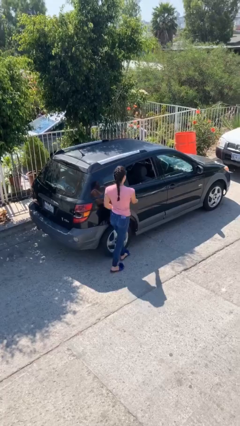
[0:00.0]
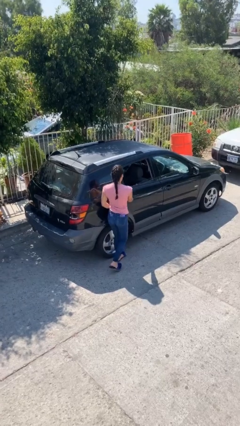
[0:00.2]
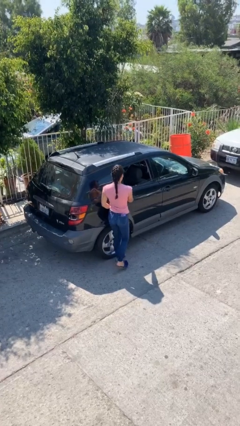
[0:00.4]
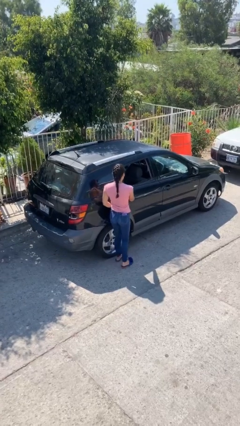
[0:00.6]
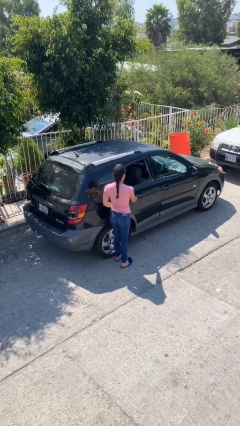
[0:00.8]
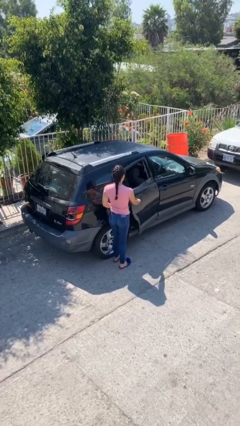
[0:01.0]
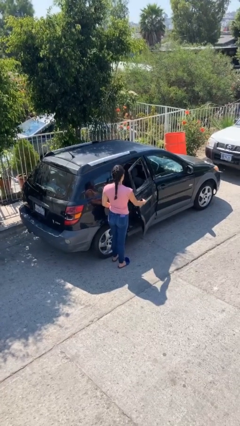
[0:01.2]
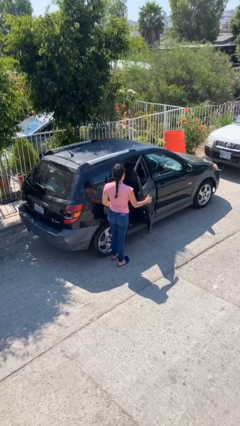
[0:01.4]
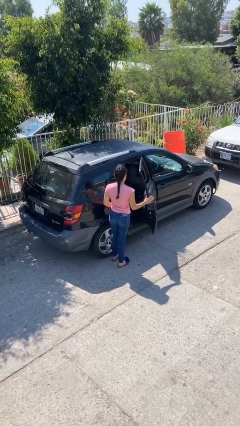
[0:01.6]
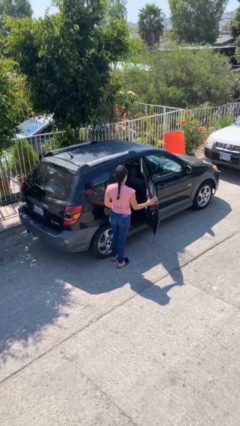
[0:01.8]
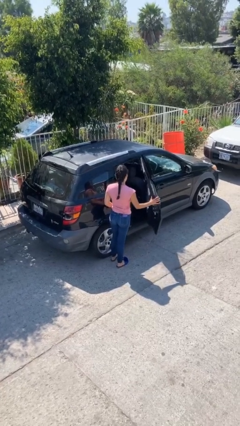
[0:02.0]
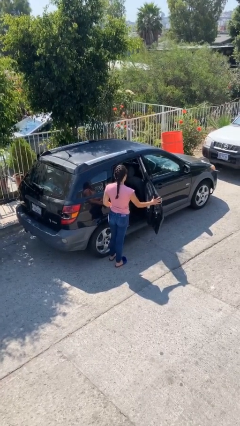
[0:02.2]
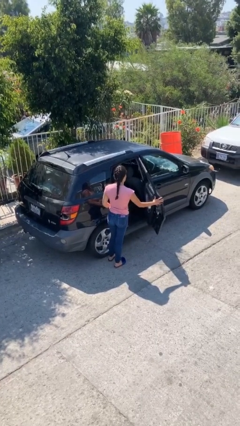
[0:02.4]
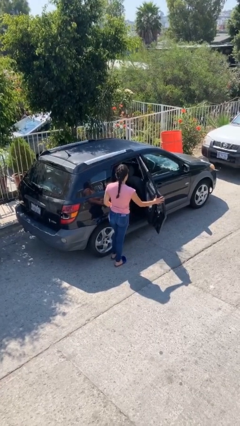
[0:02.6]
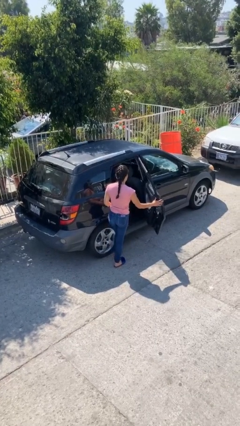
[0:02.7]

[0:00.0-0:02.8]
person opens car door

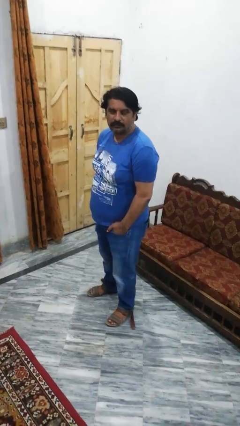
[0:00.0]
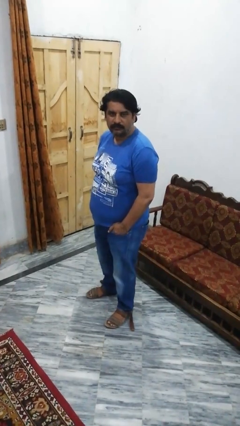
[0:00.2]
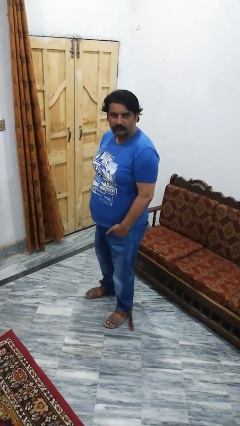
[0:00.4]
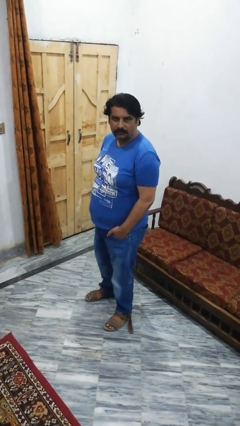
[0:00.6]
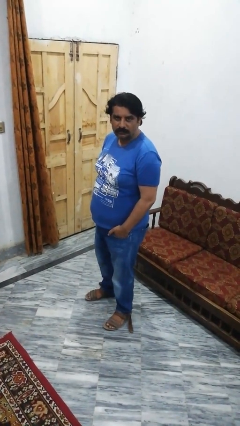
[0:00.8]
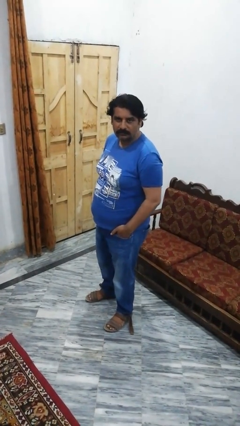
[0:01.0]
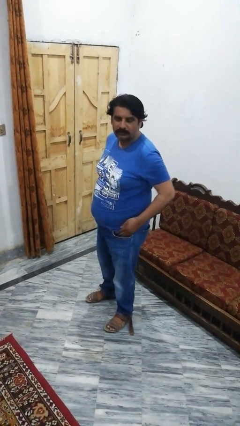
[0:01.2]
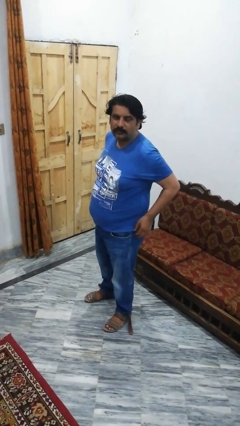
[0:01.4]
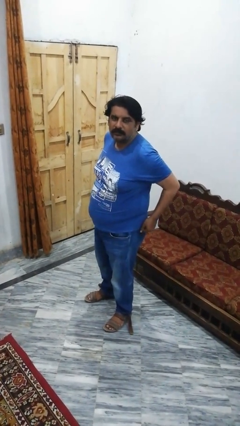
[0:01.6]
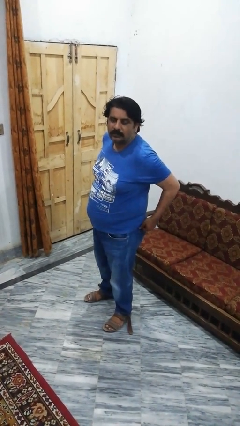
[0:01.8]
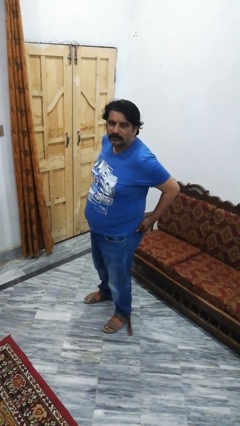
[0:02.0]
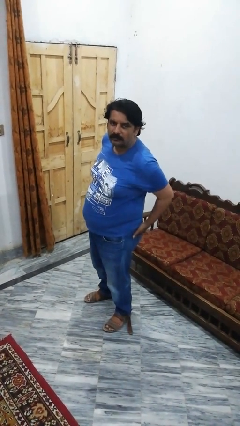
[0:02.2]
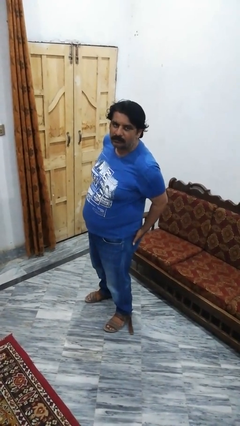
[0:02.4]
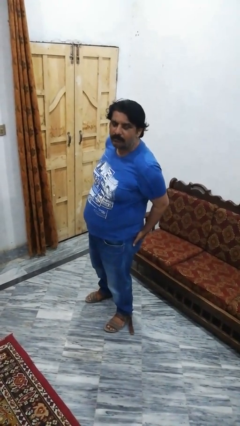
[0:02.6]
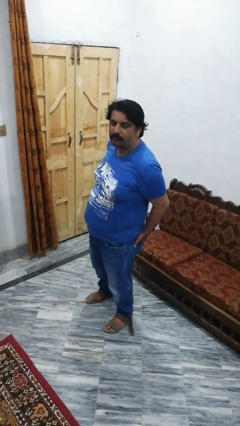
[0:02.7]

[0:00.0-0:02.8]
person puts hands in back pockets

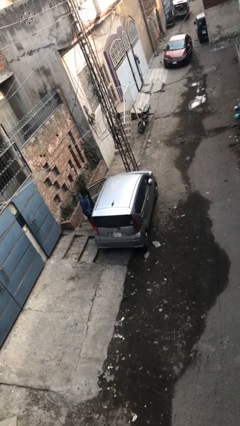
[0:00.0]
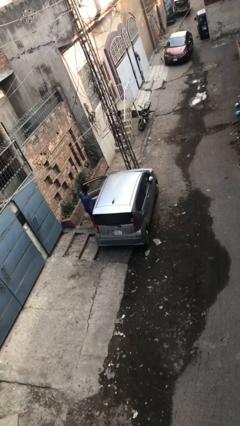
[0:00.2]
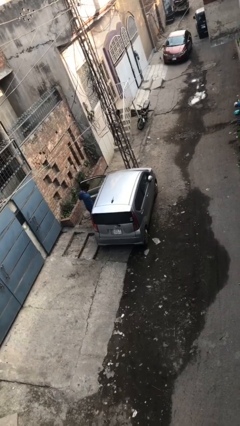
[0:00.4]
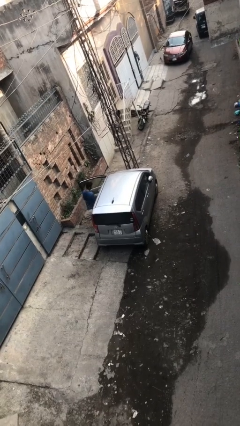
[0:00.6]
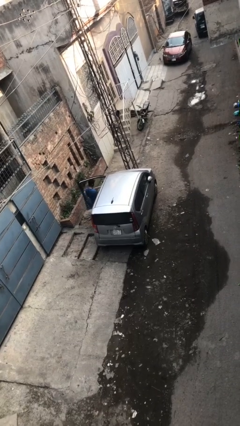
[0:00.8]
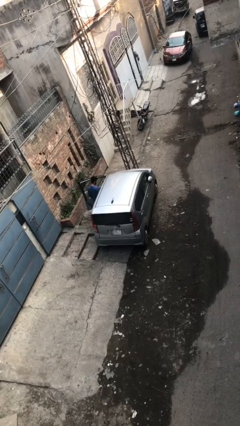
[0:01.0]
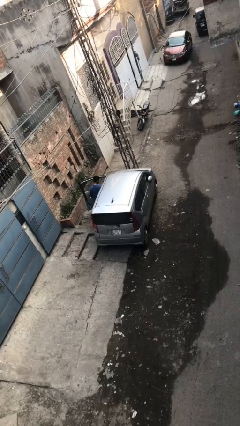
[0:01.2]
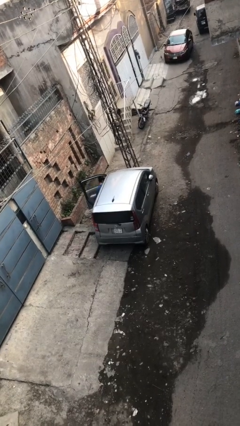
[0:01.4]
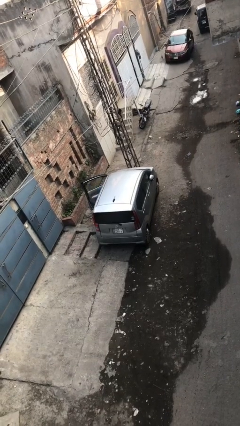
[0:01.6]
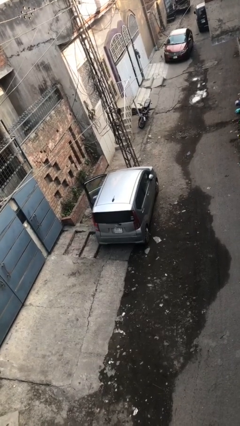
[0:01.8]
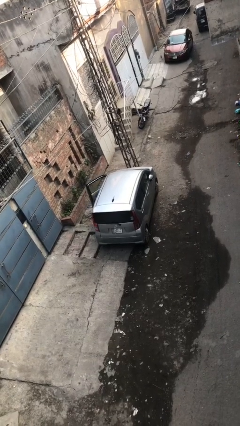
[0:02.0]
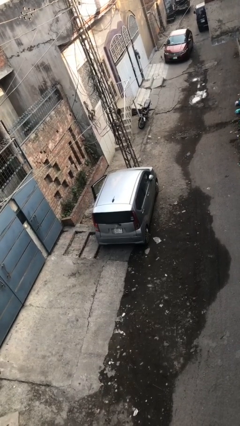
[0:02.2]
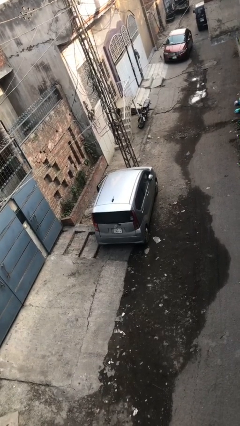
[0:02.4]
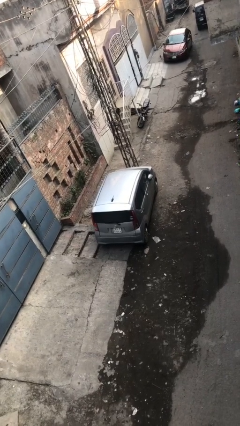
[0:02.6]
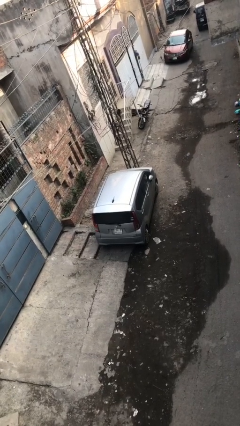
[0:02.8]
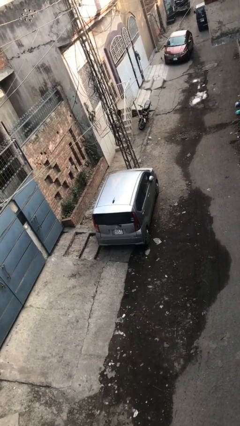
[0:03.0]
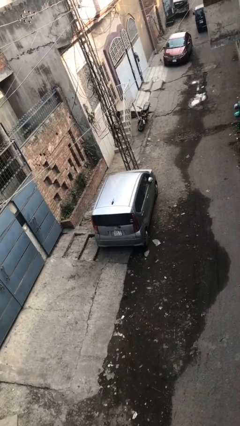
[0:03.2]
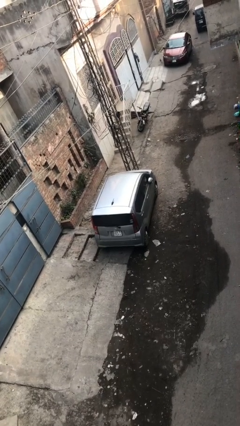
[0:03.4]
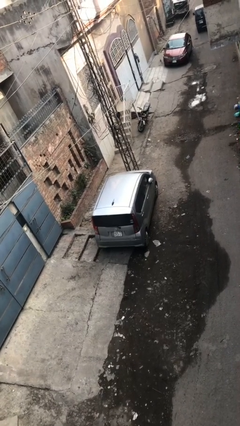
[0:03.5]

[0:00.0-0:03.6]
car picks up person

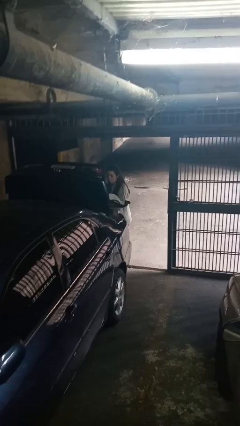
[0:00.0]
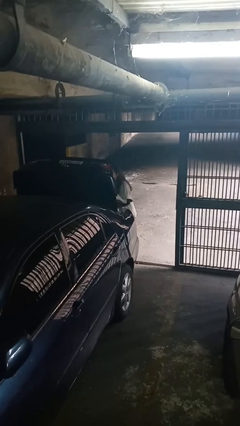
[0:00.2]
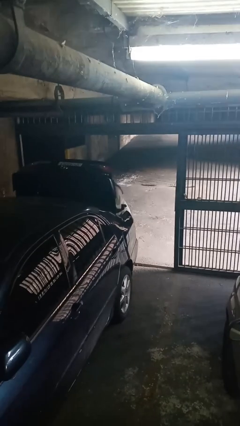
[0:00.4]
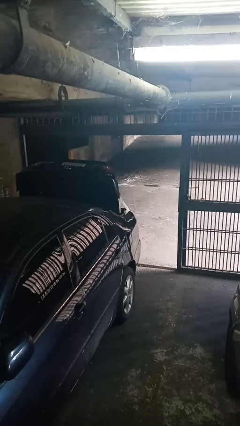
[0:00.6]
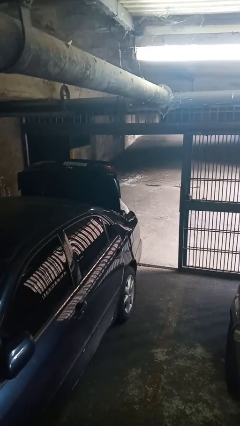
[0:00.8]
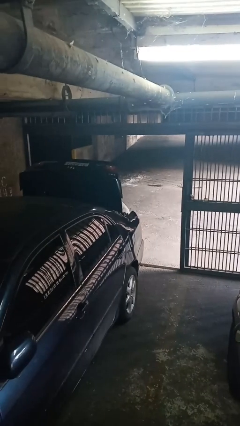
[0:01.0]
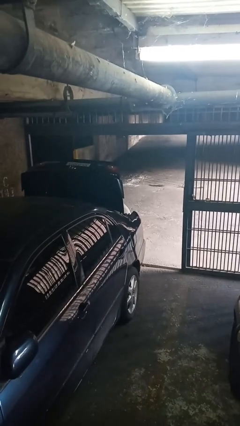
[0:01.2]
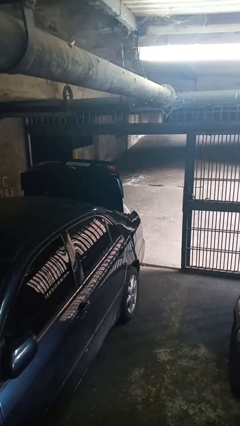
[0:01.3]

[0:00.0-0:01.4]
person loads car

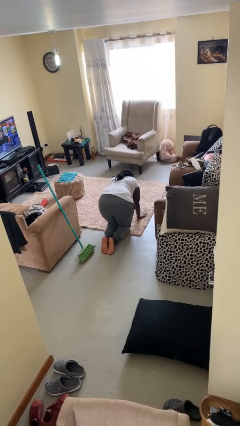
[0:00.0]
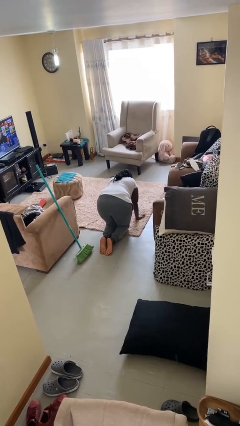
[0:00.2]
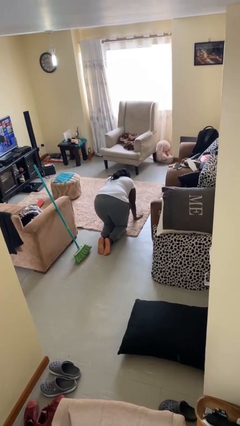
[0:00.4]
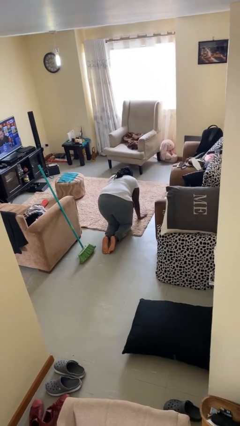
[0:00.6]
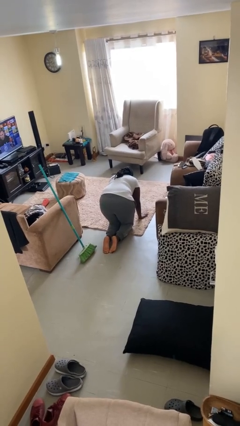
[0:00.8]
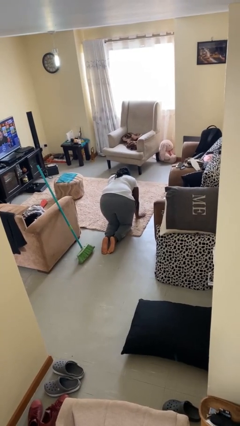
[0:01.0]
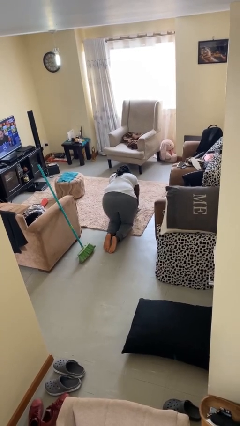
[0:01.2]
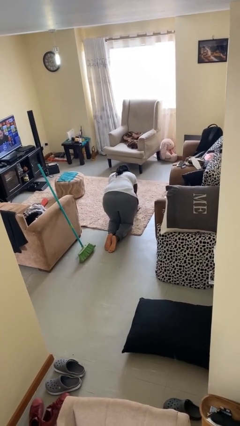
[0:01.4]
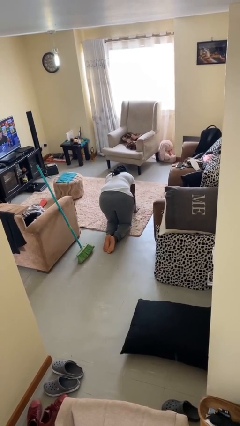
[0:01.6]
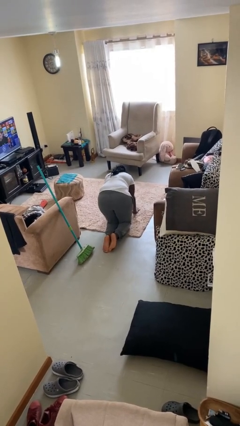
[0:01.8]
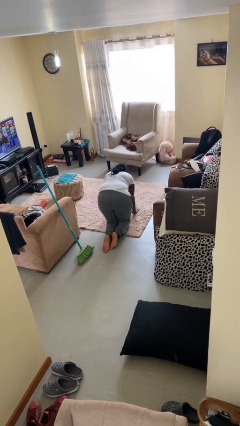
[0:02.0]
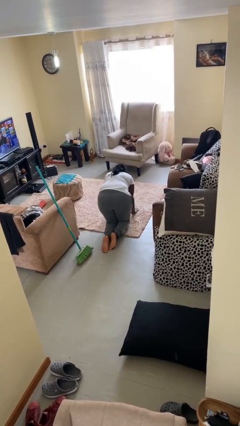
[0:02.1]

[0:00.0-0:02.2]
person crawls

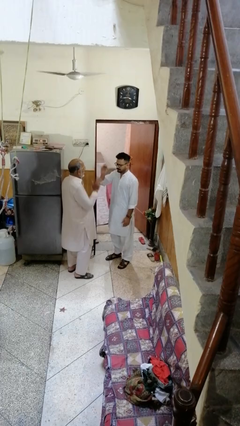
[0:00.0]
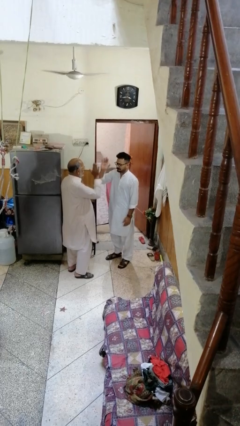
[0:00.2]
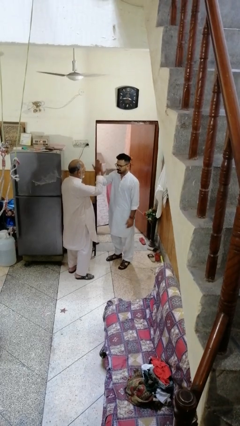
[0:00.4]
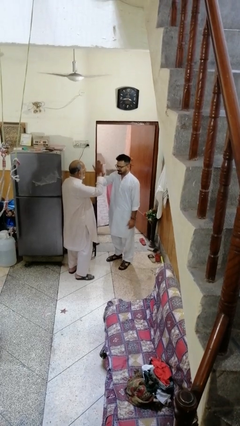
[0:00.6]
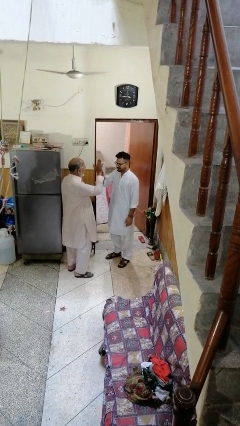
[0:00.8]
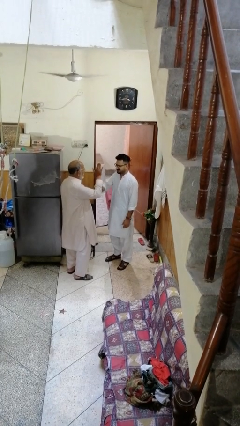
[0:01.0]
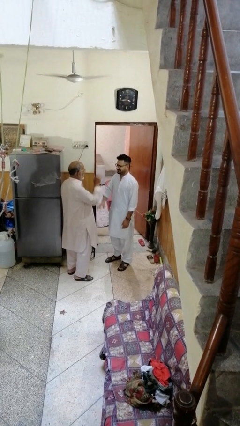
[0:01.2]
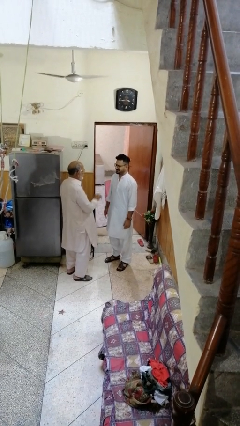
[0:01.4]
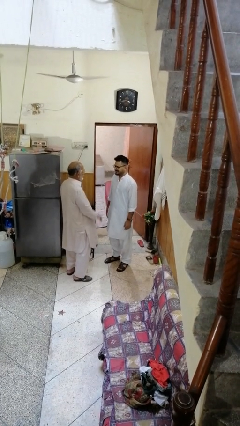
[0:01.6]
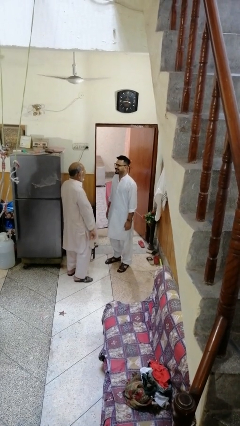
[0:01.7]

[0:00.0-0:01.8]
person highfives hand

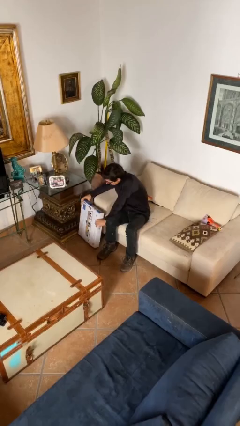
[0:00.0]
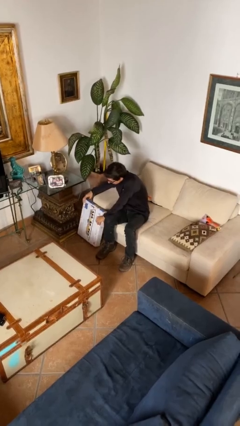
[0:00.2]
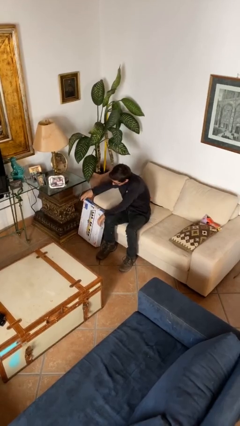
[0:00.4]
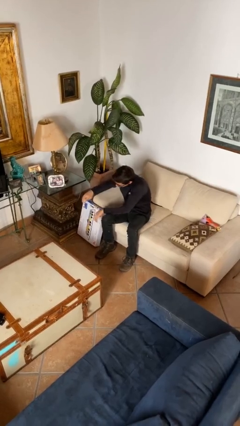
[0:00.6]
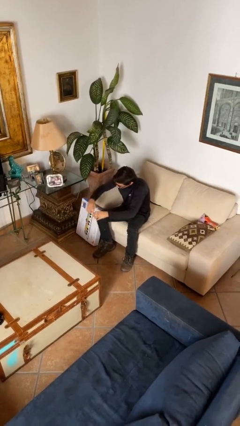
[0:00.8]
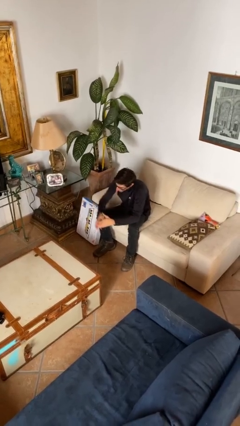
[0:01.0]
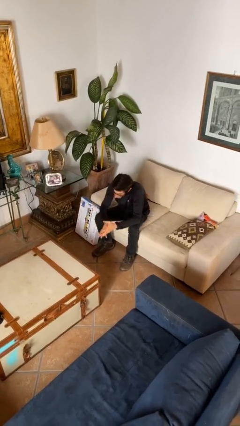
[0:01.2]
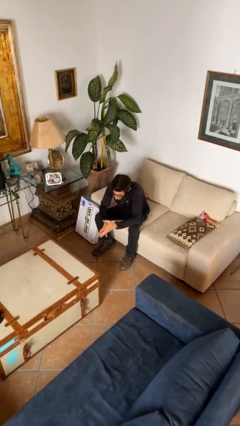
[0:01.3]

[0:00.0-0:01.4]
person puts down object on floor

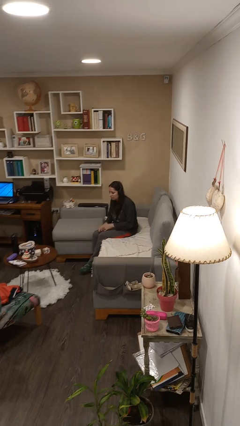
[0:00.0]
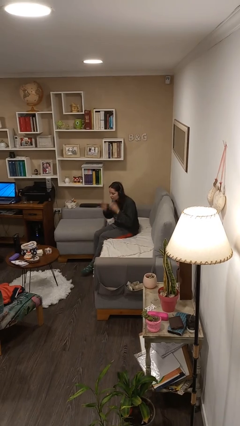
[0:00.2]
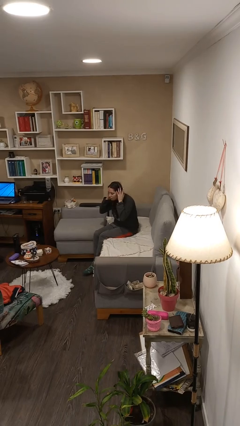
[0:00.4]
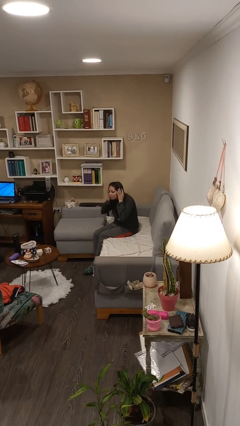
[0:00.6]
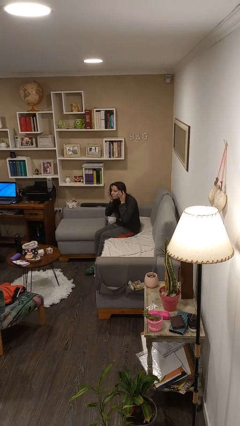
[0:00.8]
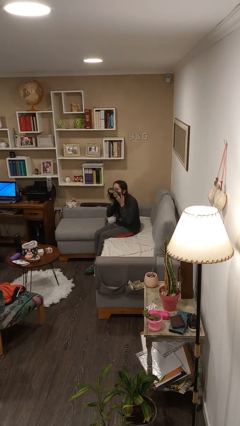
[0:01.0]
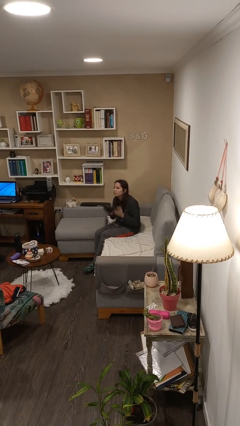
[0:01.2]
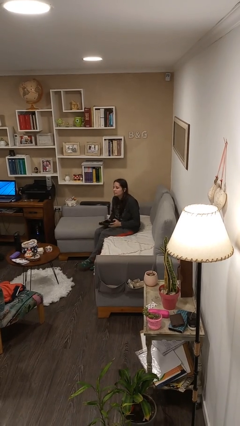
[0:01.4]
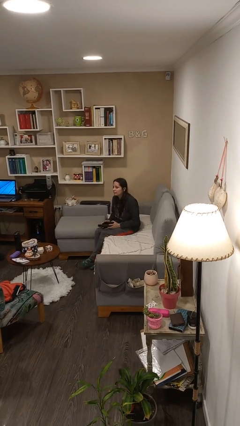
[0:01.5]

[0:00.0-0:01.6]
person takes off headphones
